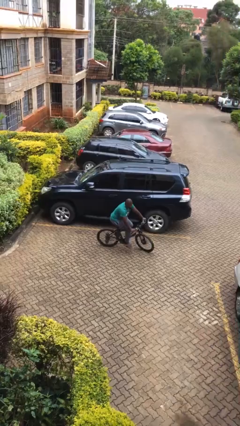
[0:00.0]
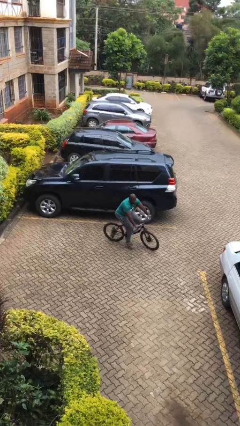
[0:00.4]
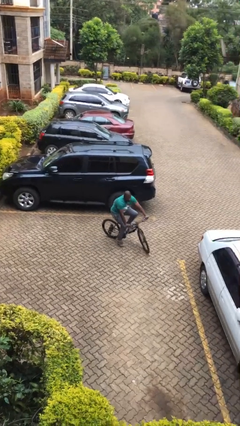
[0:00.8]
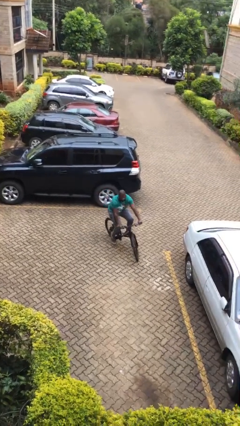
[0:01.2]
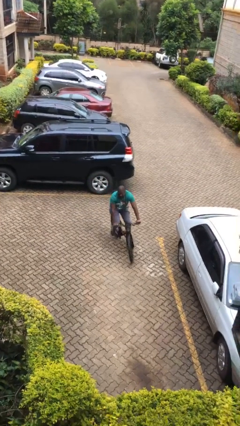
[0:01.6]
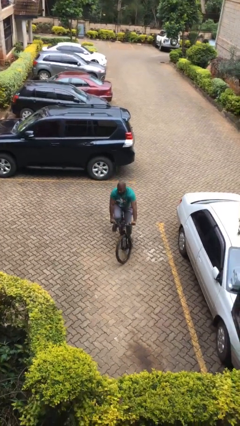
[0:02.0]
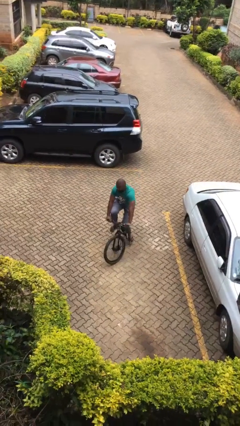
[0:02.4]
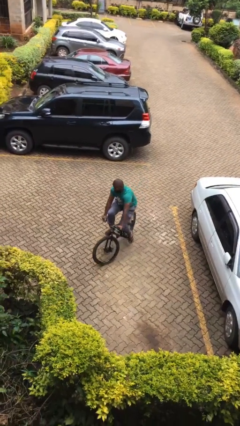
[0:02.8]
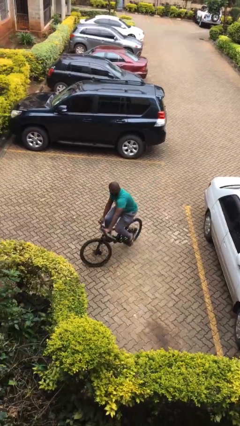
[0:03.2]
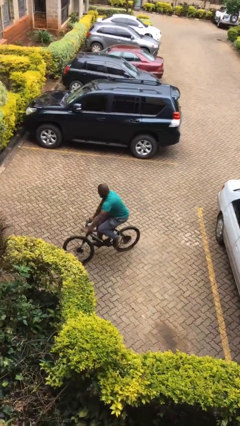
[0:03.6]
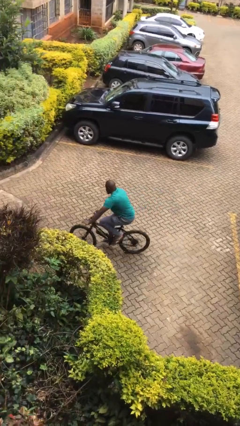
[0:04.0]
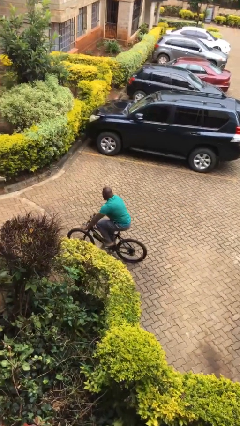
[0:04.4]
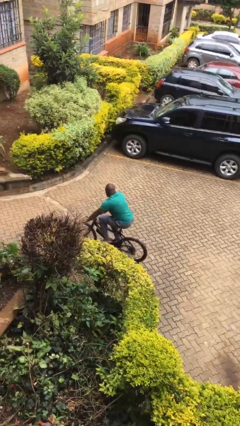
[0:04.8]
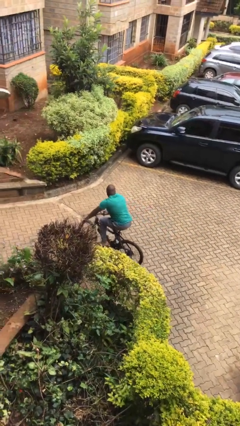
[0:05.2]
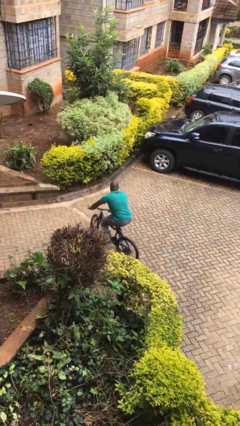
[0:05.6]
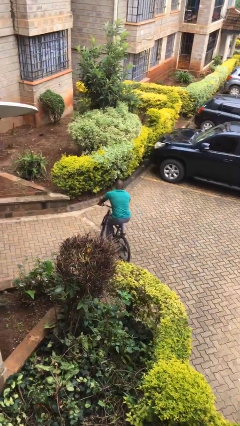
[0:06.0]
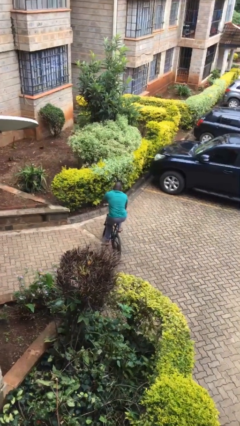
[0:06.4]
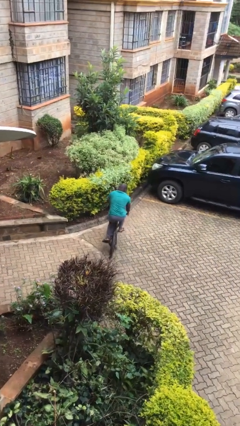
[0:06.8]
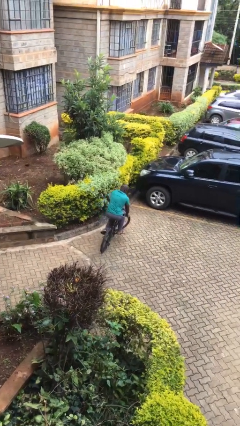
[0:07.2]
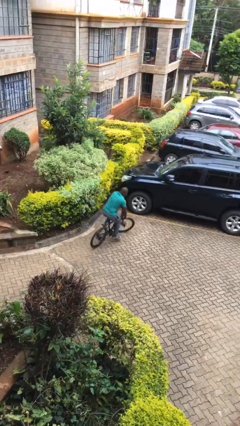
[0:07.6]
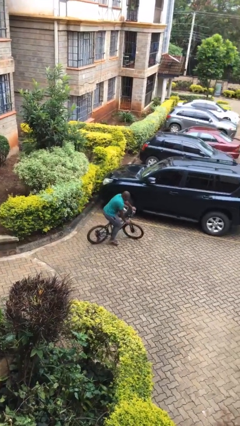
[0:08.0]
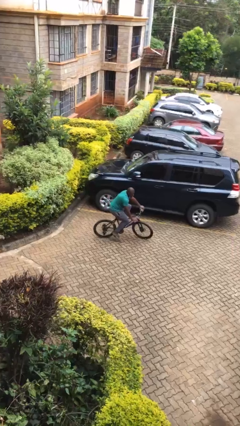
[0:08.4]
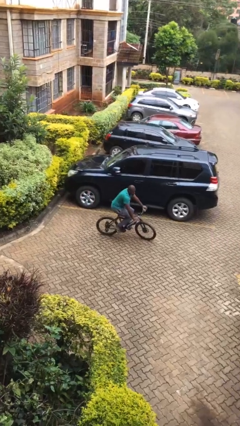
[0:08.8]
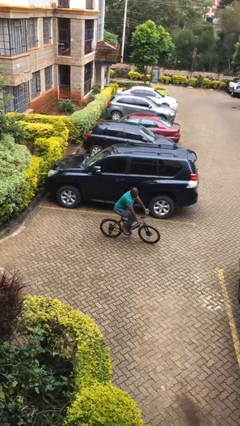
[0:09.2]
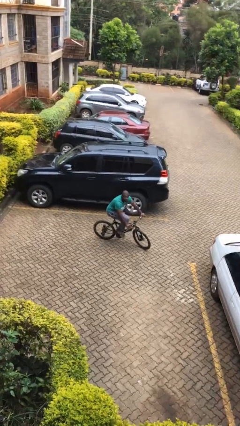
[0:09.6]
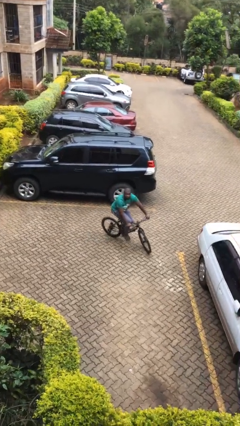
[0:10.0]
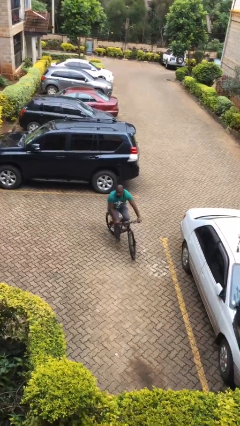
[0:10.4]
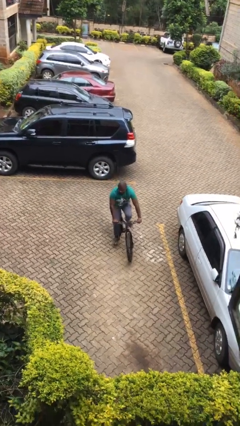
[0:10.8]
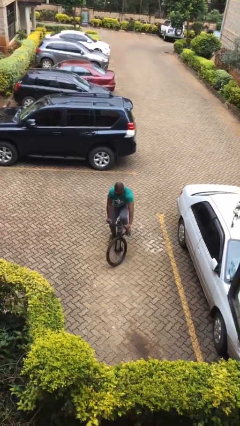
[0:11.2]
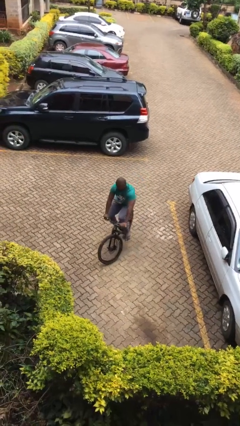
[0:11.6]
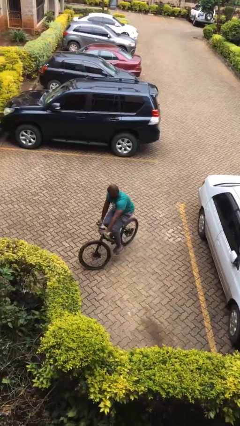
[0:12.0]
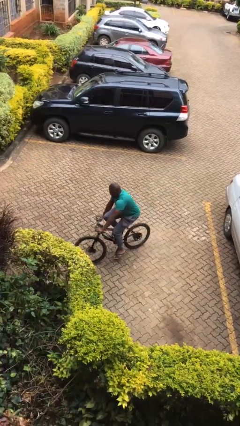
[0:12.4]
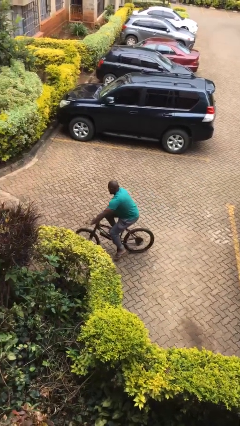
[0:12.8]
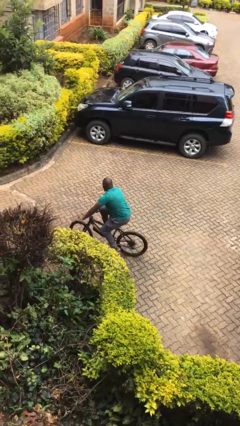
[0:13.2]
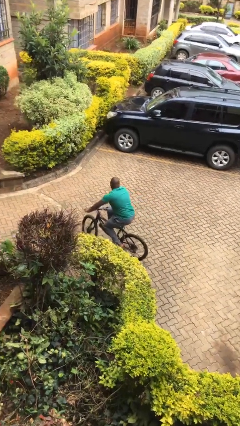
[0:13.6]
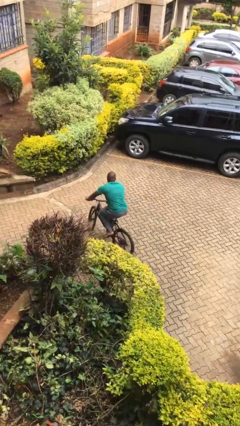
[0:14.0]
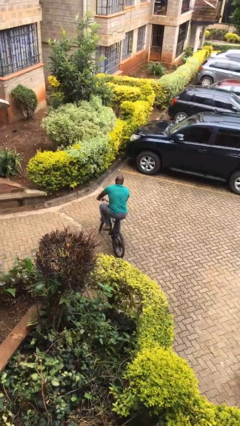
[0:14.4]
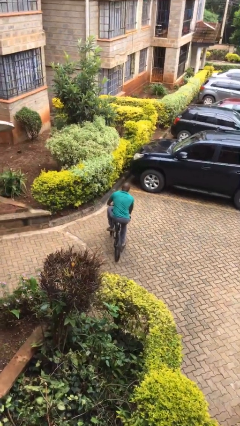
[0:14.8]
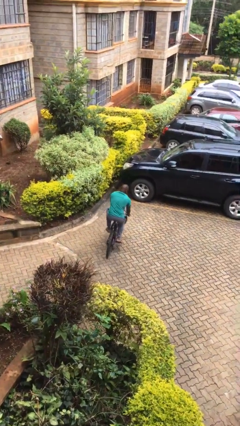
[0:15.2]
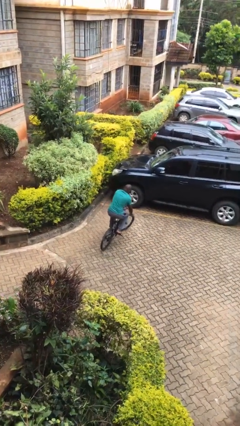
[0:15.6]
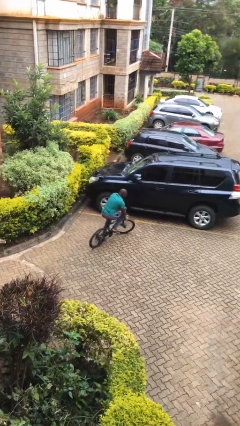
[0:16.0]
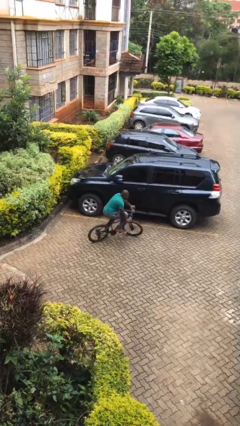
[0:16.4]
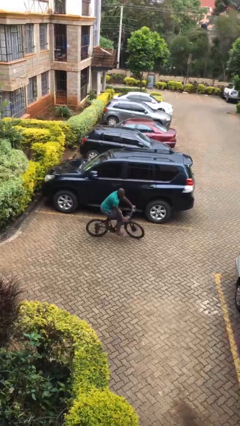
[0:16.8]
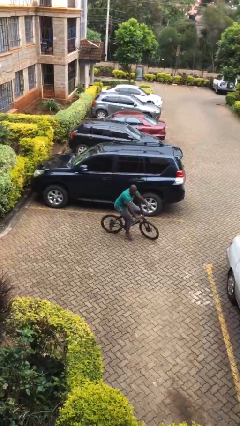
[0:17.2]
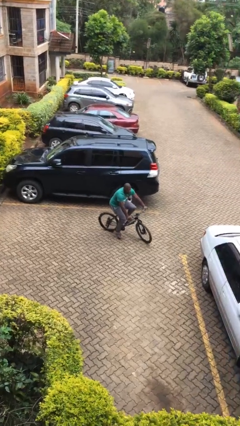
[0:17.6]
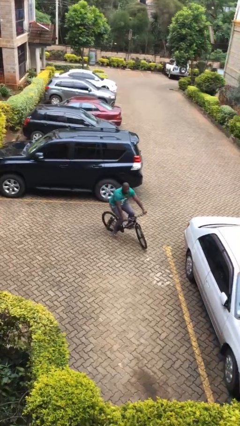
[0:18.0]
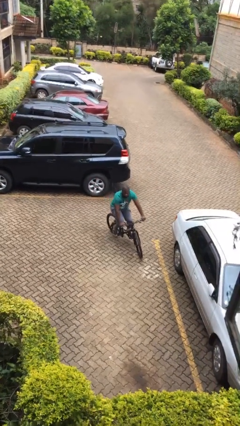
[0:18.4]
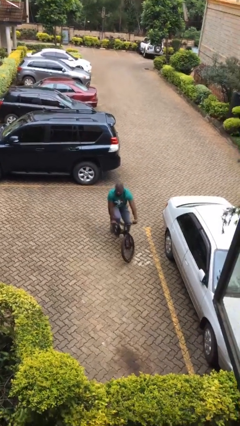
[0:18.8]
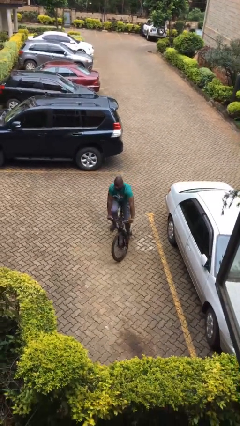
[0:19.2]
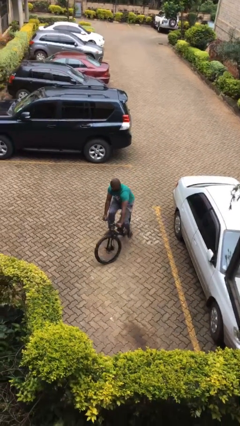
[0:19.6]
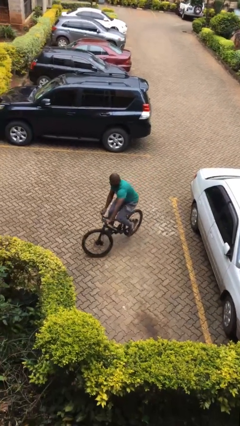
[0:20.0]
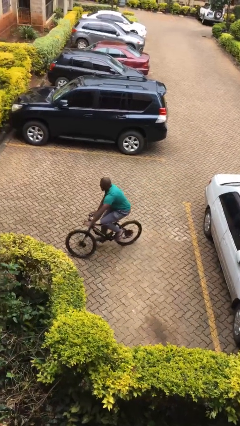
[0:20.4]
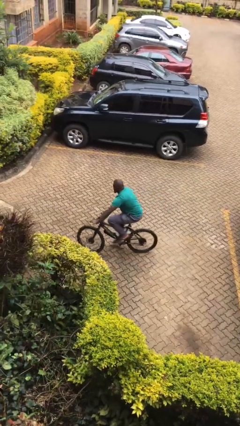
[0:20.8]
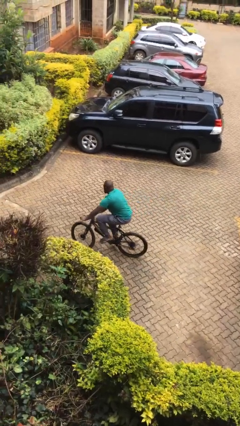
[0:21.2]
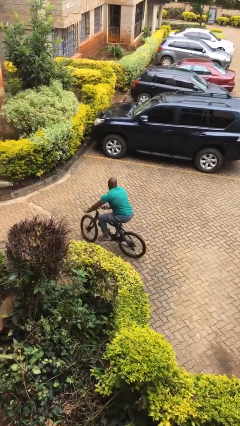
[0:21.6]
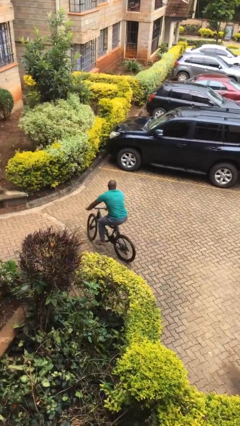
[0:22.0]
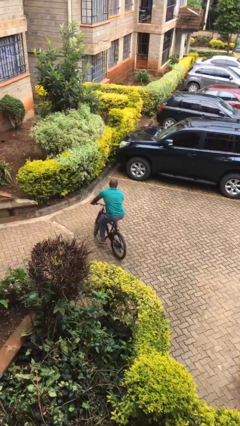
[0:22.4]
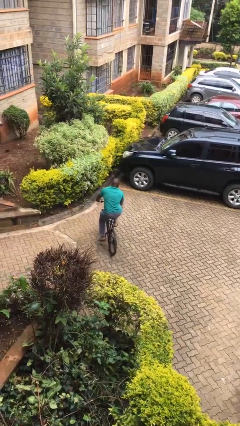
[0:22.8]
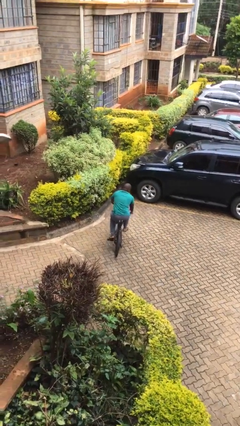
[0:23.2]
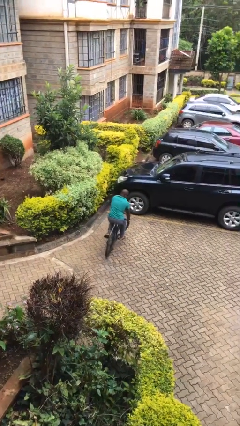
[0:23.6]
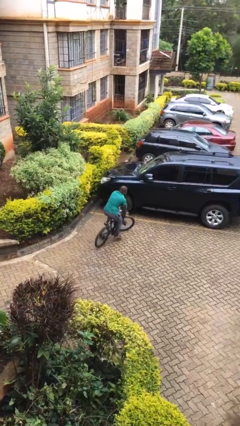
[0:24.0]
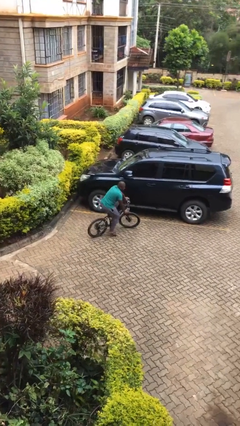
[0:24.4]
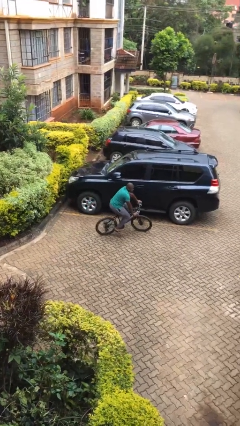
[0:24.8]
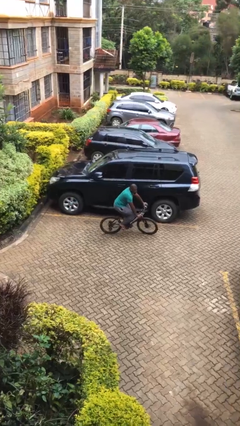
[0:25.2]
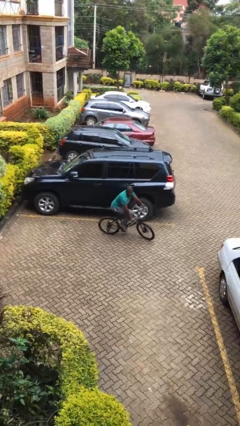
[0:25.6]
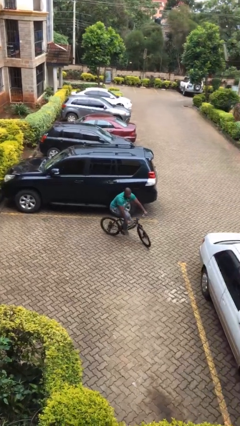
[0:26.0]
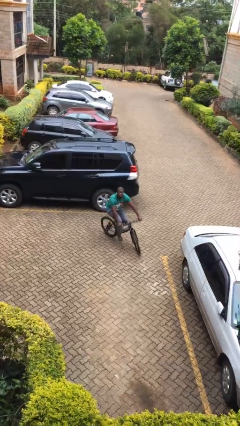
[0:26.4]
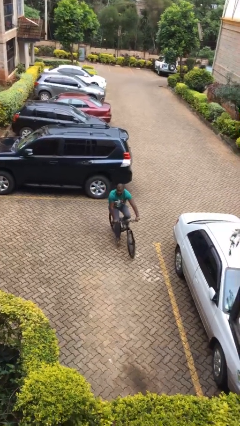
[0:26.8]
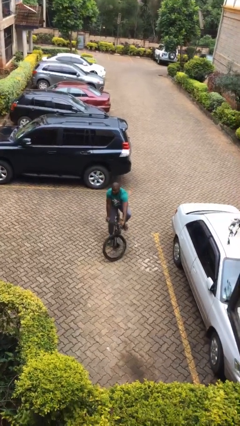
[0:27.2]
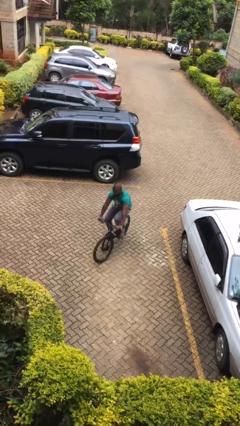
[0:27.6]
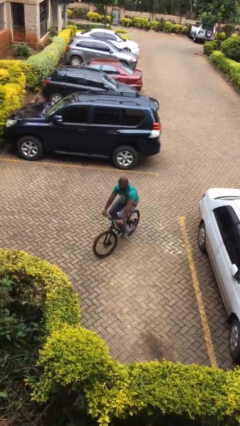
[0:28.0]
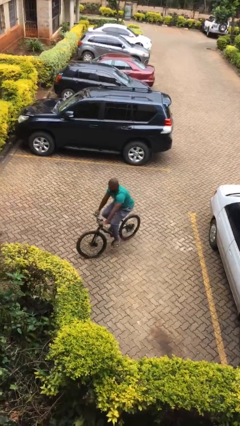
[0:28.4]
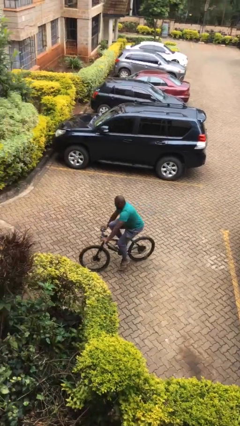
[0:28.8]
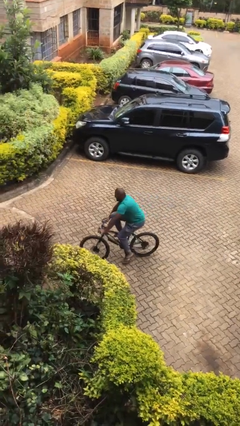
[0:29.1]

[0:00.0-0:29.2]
person rides bicycle

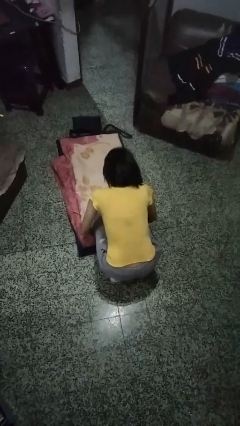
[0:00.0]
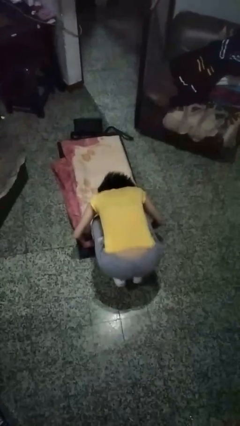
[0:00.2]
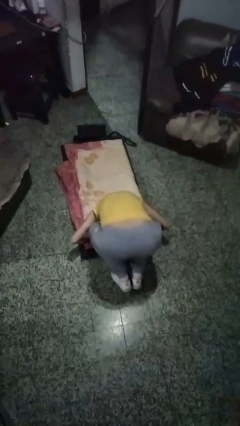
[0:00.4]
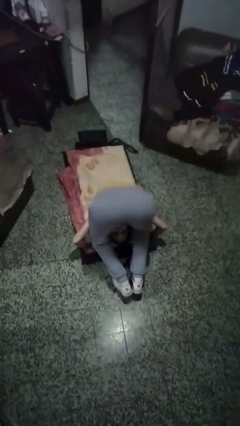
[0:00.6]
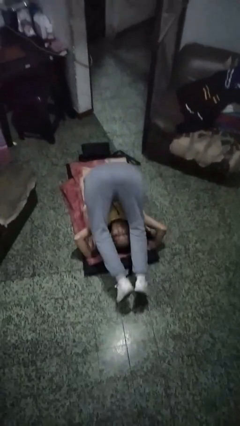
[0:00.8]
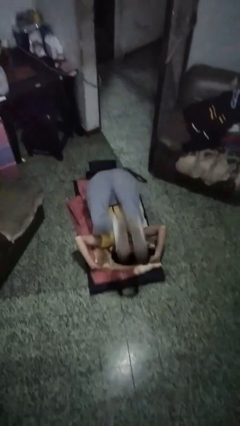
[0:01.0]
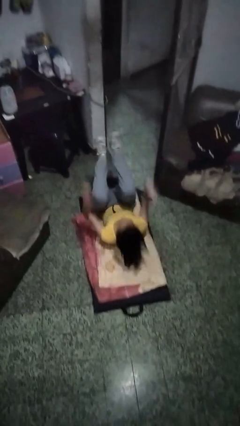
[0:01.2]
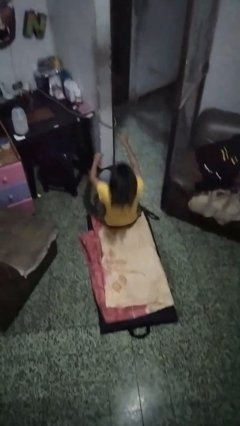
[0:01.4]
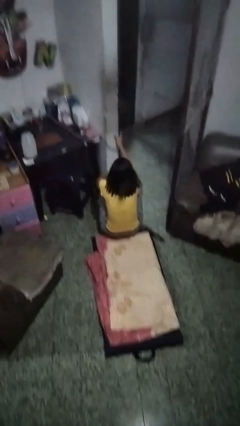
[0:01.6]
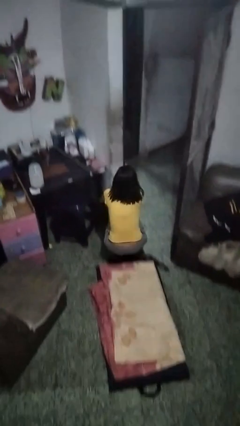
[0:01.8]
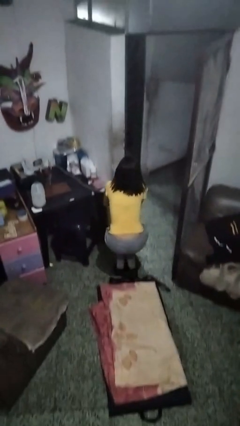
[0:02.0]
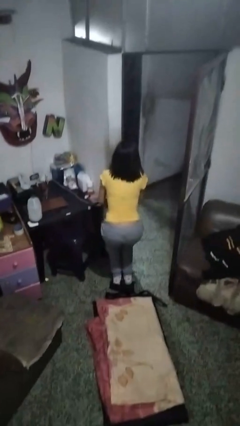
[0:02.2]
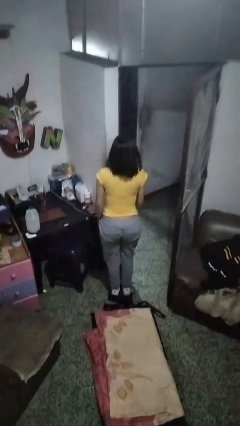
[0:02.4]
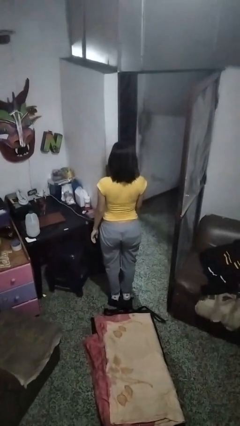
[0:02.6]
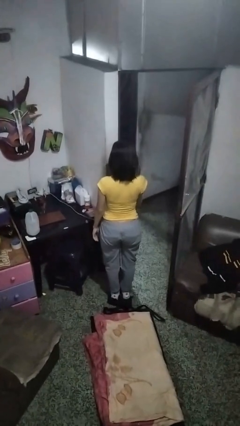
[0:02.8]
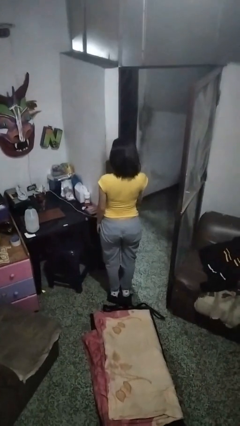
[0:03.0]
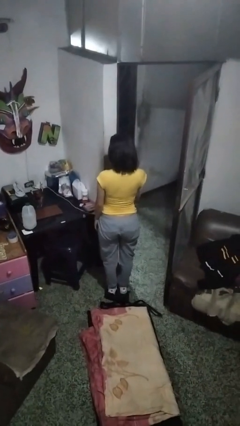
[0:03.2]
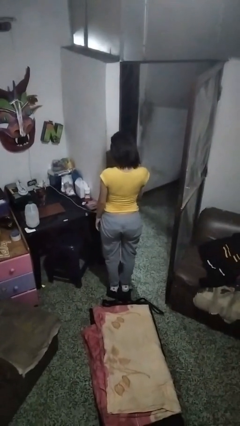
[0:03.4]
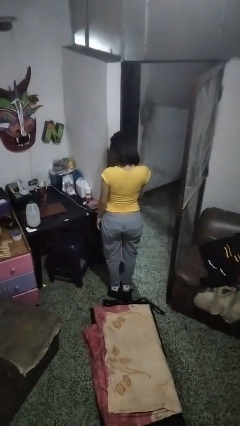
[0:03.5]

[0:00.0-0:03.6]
person somersaults
